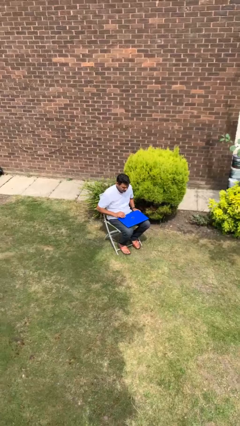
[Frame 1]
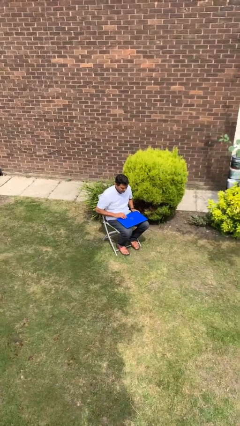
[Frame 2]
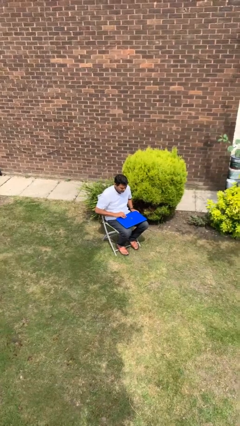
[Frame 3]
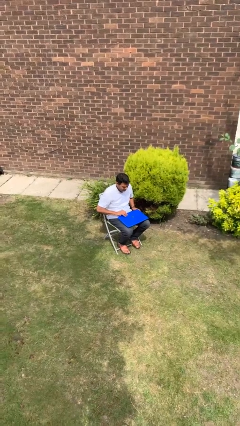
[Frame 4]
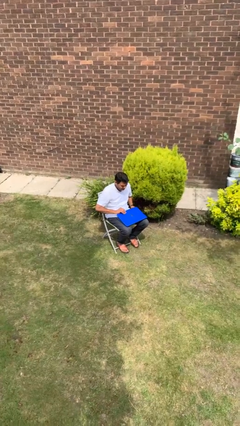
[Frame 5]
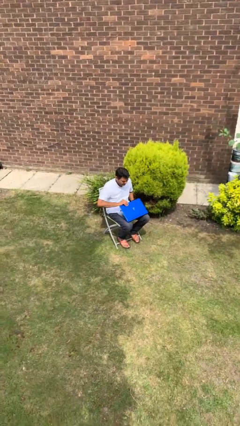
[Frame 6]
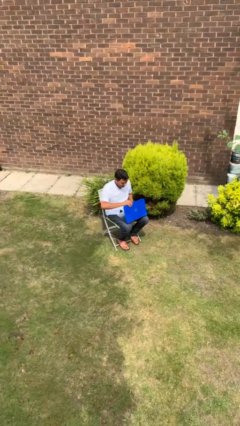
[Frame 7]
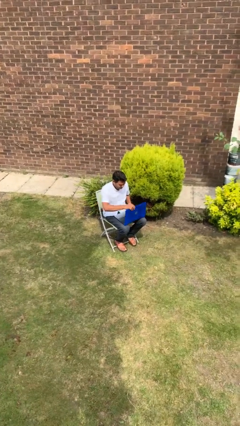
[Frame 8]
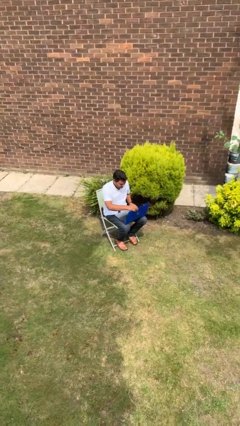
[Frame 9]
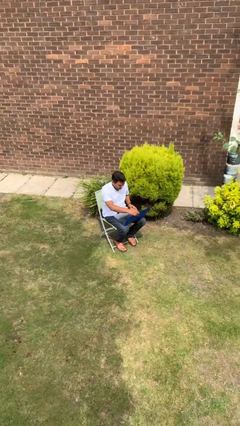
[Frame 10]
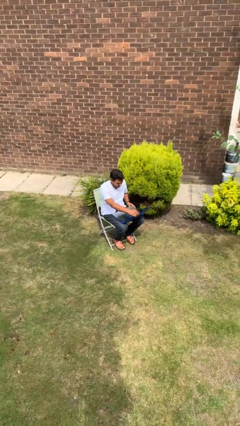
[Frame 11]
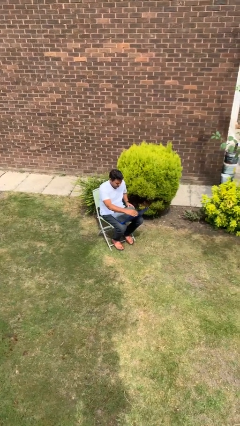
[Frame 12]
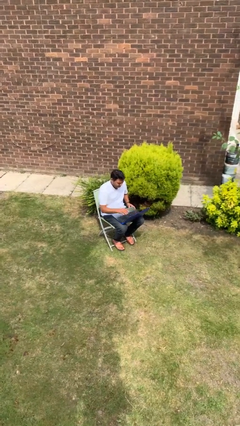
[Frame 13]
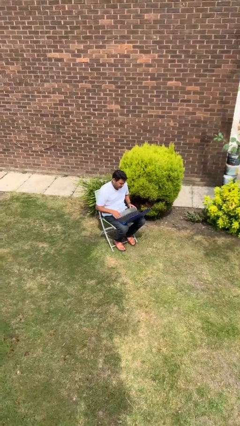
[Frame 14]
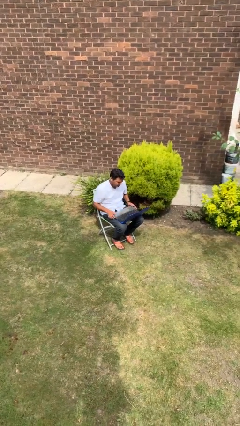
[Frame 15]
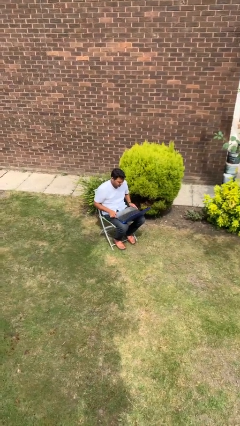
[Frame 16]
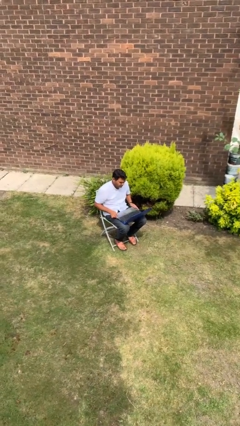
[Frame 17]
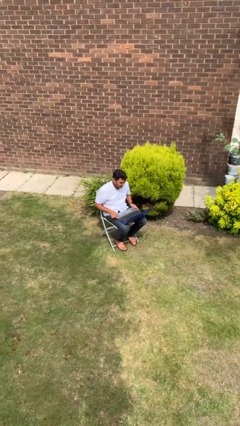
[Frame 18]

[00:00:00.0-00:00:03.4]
person opens laptop

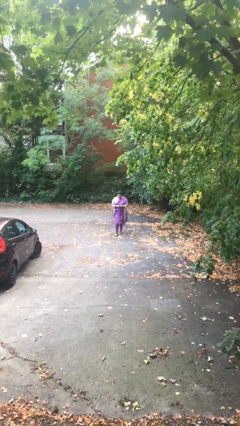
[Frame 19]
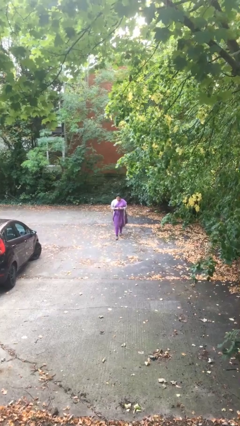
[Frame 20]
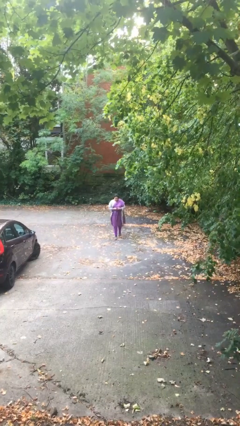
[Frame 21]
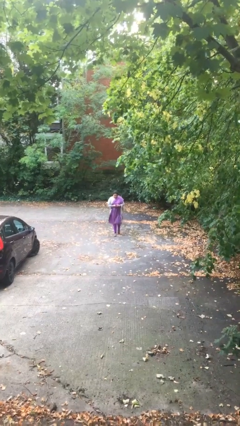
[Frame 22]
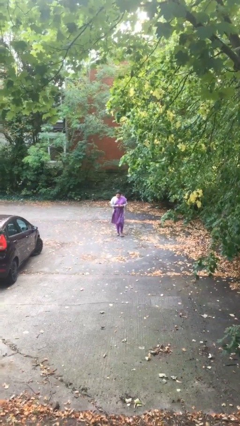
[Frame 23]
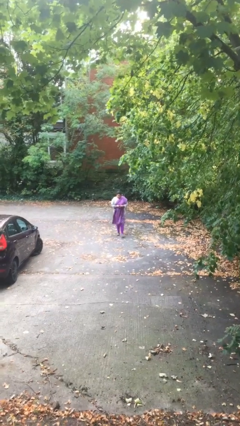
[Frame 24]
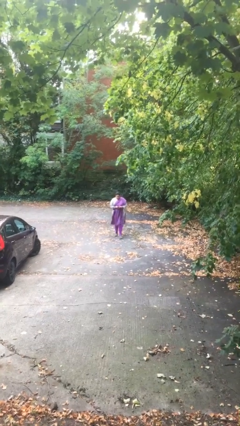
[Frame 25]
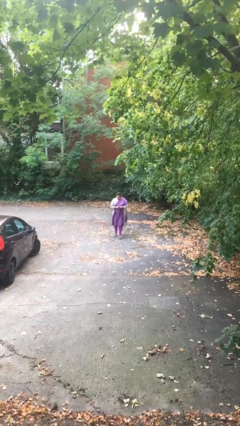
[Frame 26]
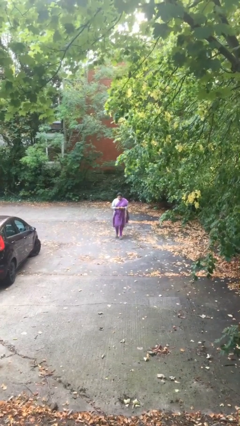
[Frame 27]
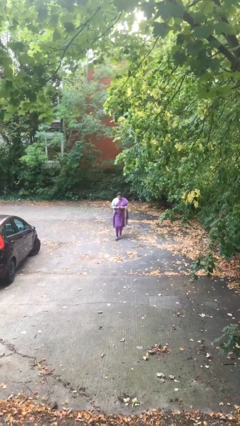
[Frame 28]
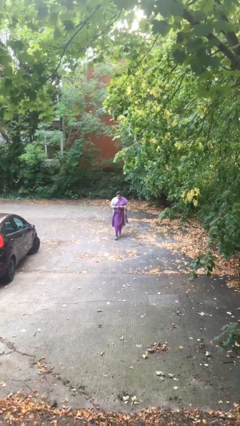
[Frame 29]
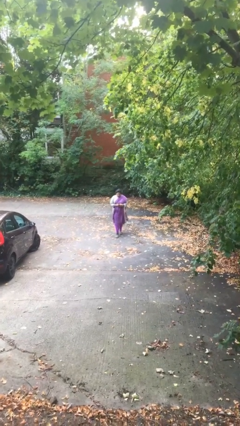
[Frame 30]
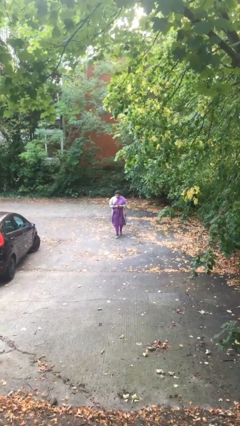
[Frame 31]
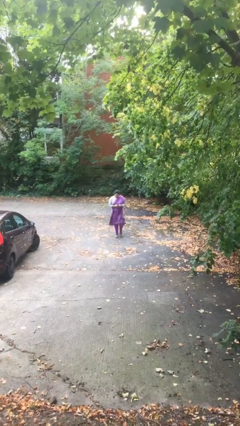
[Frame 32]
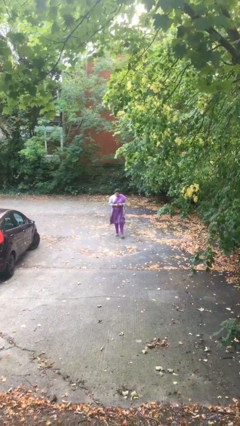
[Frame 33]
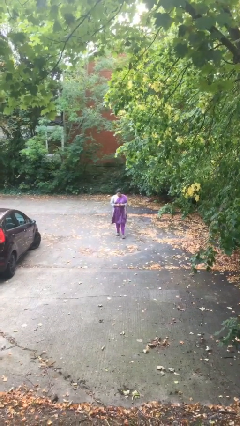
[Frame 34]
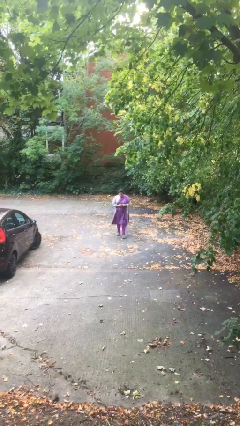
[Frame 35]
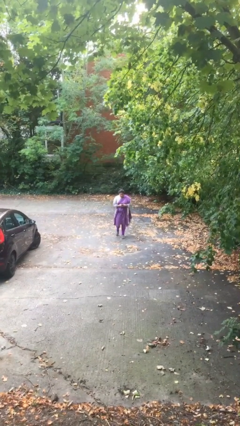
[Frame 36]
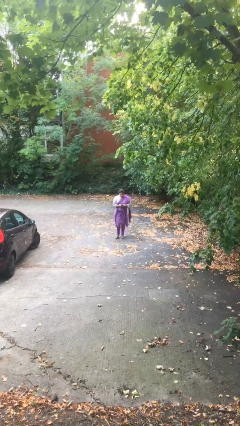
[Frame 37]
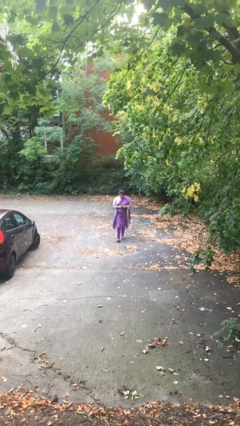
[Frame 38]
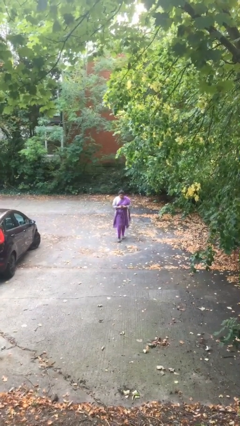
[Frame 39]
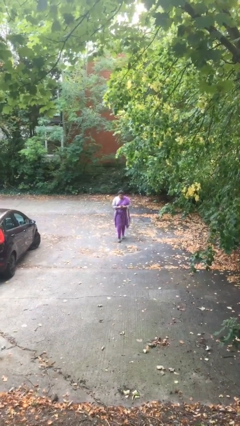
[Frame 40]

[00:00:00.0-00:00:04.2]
person texts on phone

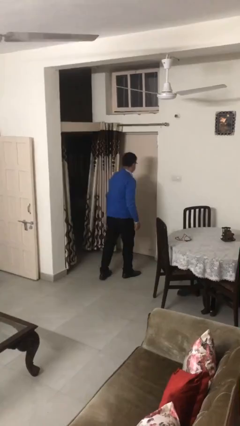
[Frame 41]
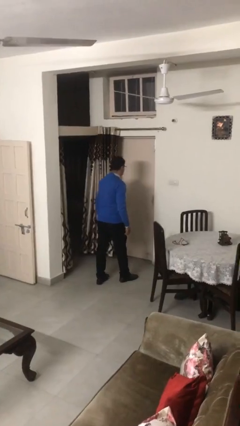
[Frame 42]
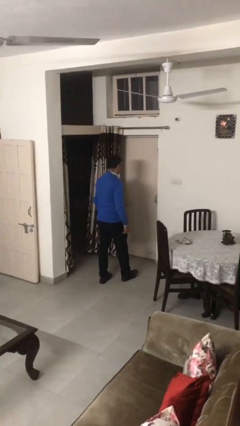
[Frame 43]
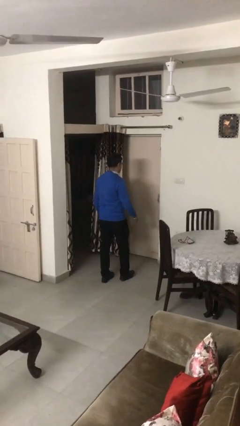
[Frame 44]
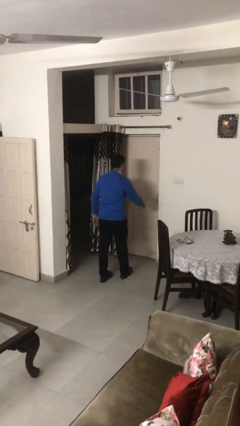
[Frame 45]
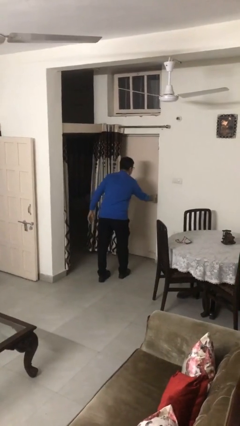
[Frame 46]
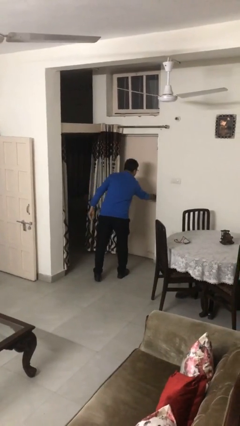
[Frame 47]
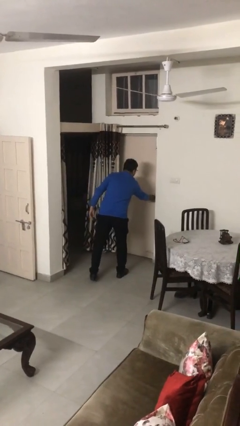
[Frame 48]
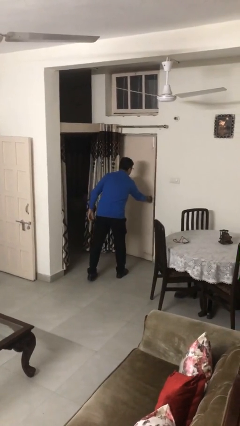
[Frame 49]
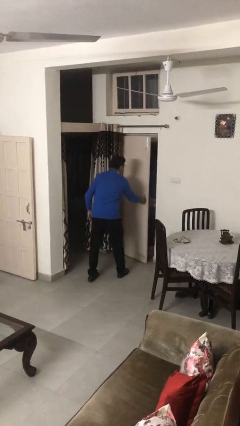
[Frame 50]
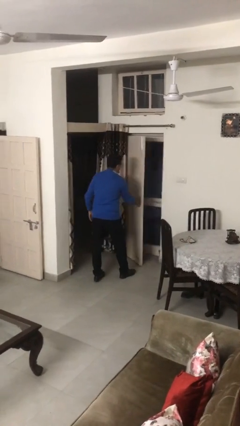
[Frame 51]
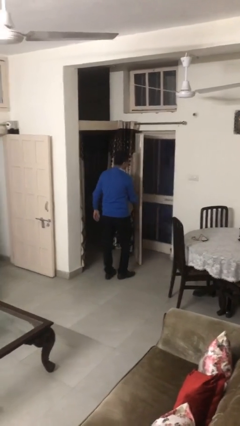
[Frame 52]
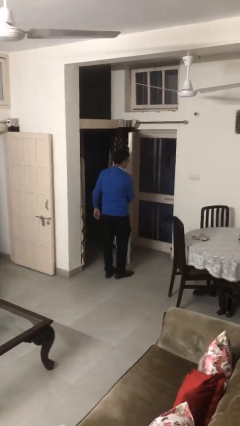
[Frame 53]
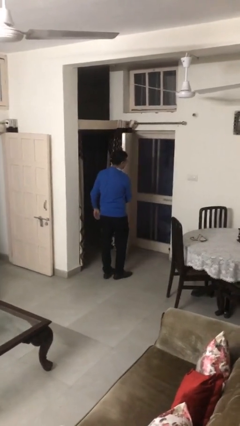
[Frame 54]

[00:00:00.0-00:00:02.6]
person opens facility door

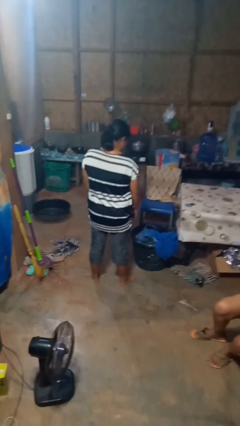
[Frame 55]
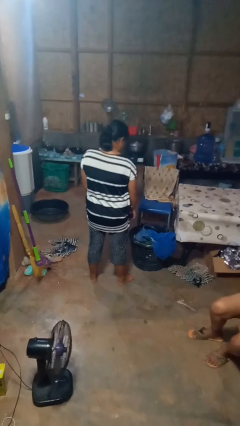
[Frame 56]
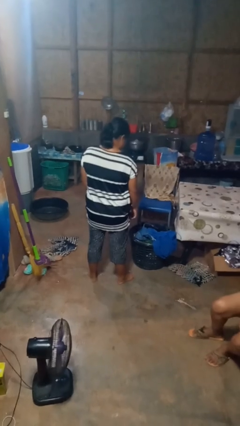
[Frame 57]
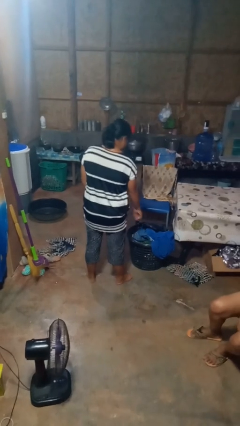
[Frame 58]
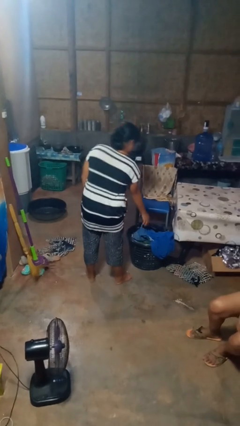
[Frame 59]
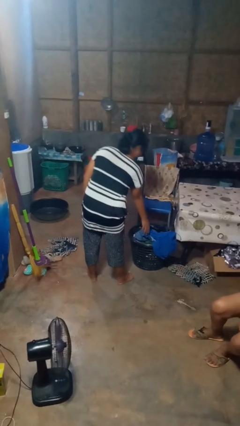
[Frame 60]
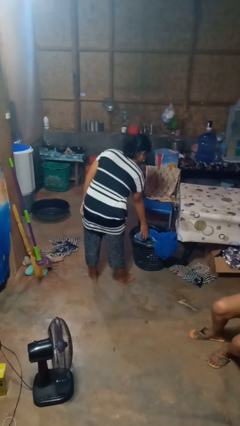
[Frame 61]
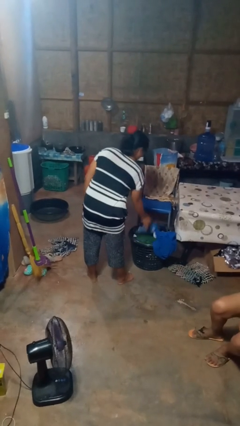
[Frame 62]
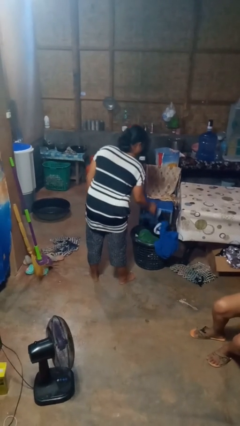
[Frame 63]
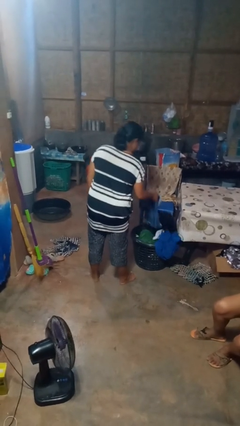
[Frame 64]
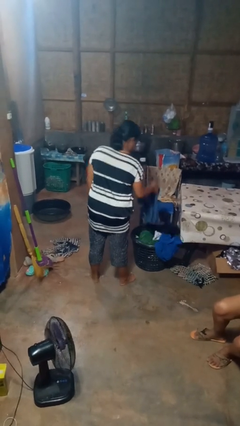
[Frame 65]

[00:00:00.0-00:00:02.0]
person takes object from basket

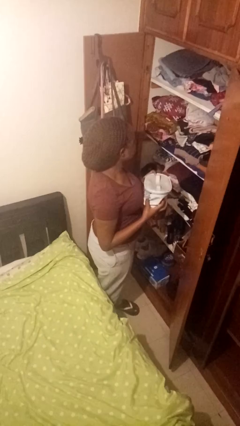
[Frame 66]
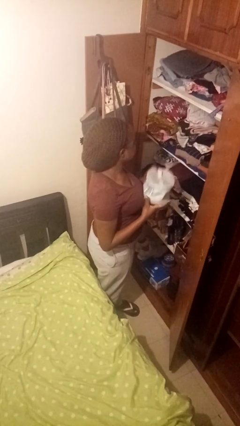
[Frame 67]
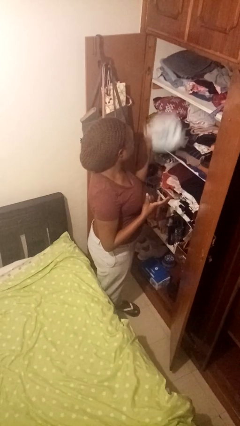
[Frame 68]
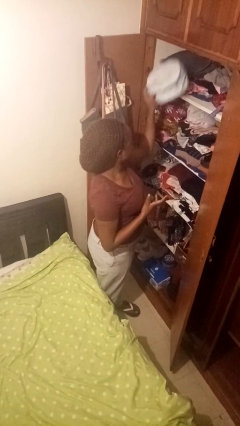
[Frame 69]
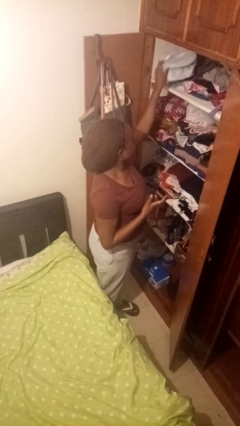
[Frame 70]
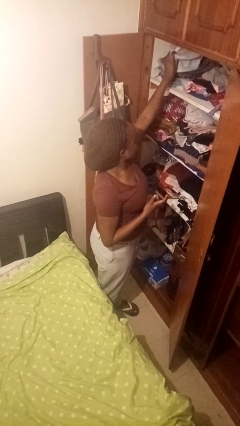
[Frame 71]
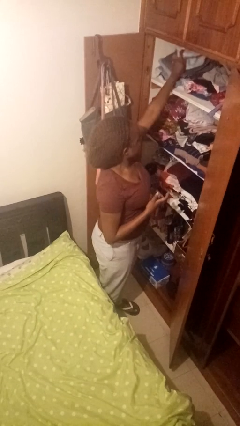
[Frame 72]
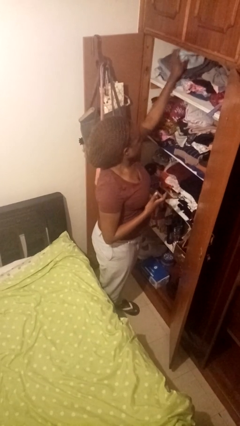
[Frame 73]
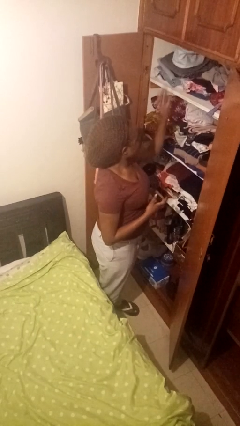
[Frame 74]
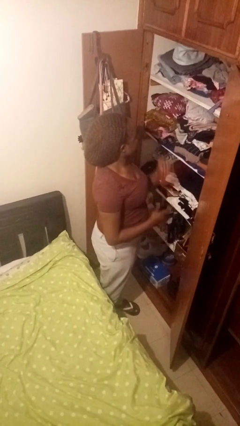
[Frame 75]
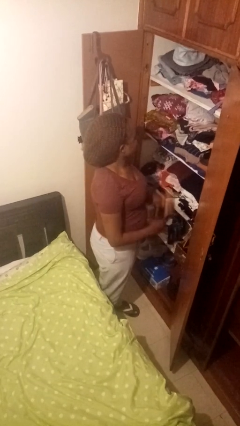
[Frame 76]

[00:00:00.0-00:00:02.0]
person puts down object on shelf

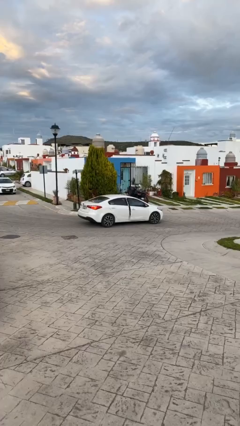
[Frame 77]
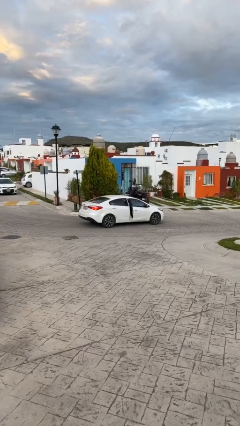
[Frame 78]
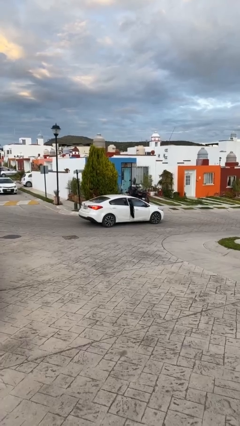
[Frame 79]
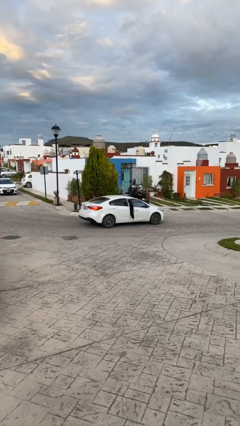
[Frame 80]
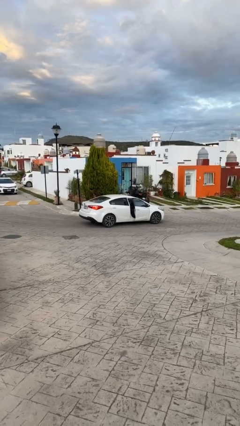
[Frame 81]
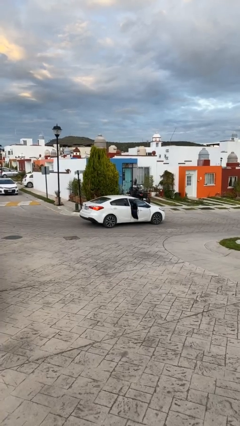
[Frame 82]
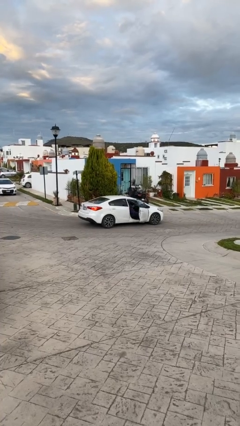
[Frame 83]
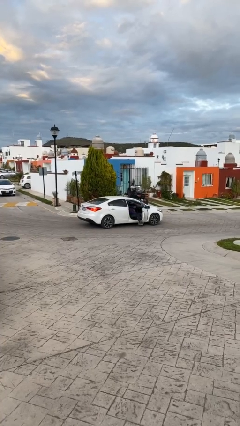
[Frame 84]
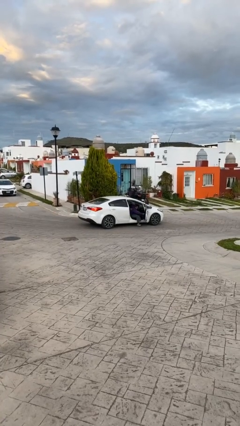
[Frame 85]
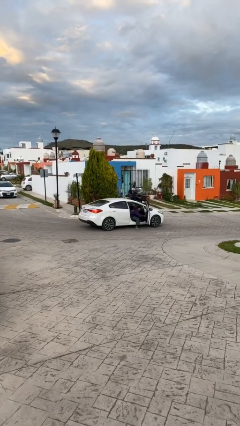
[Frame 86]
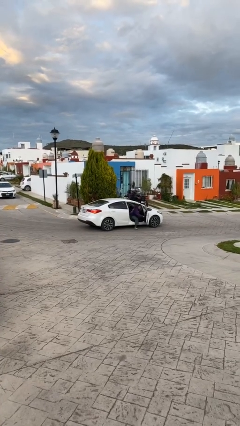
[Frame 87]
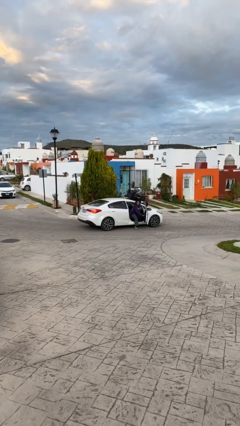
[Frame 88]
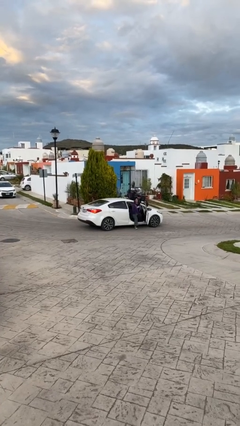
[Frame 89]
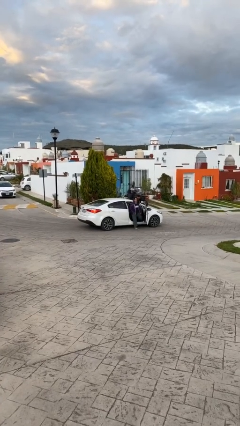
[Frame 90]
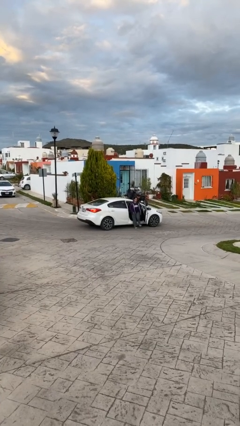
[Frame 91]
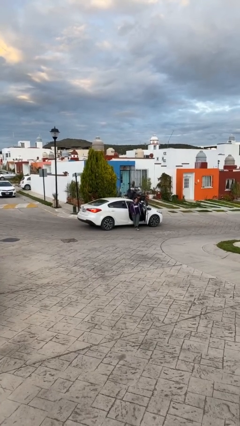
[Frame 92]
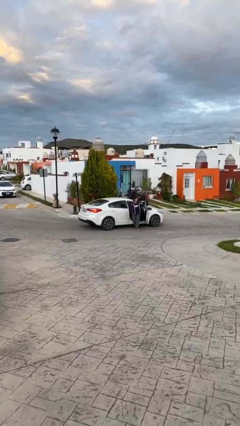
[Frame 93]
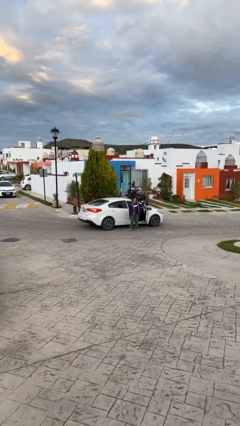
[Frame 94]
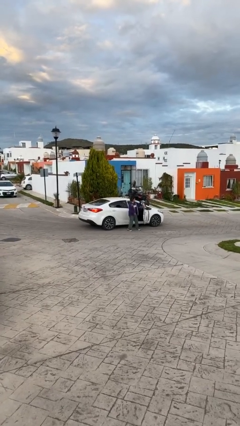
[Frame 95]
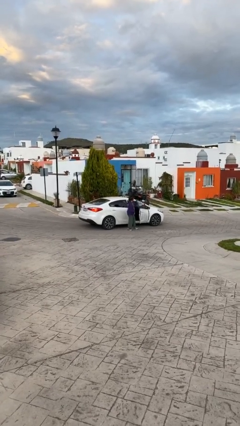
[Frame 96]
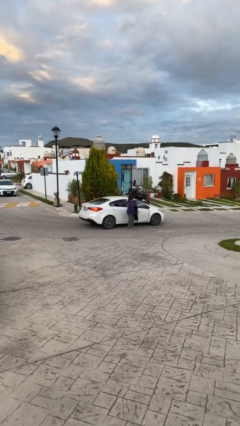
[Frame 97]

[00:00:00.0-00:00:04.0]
car drops off person
